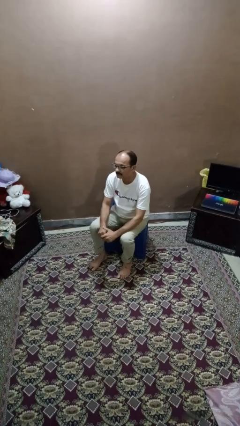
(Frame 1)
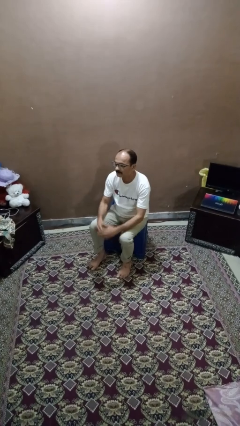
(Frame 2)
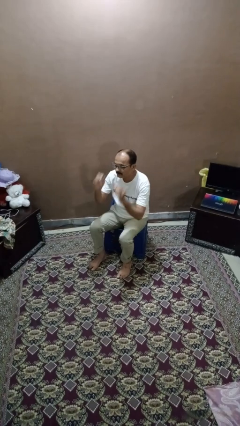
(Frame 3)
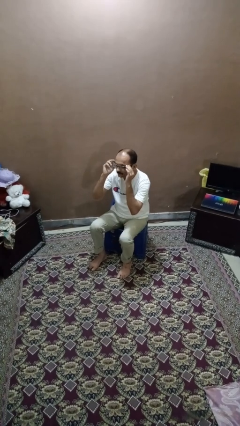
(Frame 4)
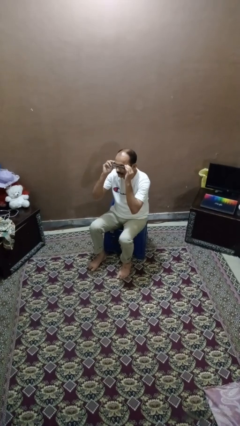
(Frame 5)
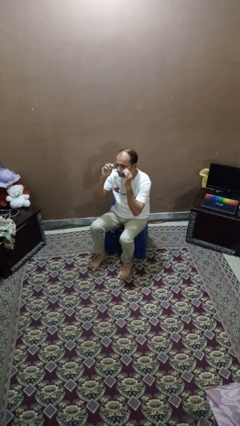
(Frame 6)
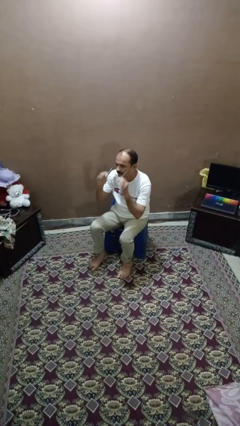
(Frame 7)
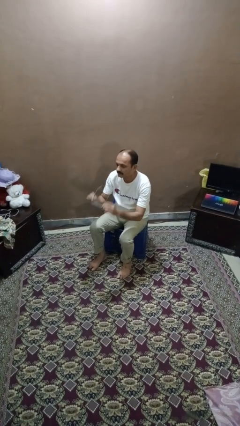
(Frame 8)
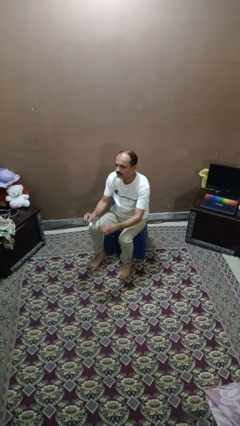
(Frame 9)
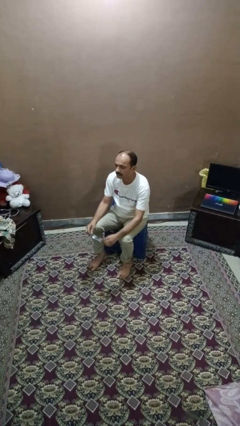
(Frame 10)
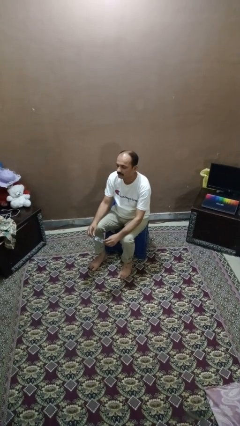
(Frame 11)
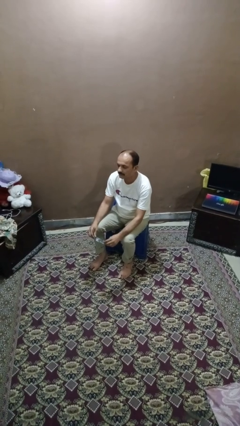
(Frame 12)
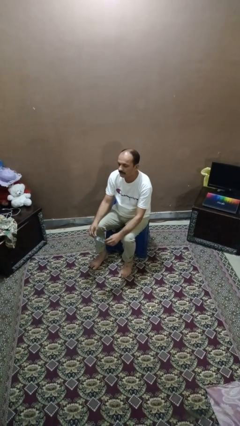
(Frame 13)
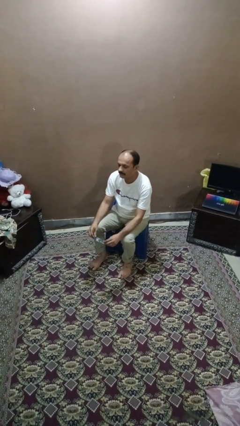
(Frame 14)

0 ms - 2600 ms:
person takes off glasses

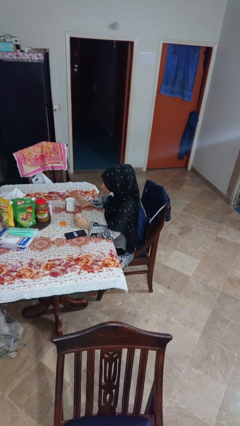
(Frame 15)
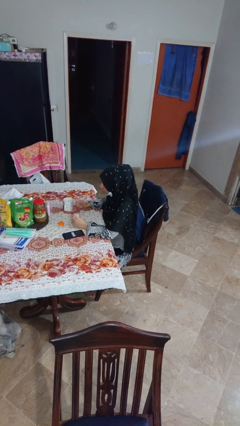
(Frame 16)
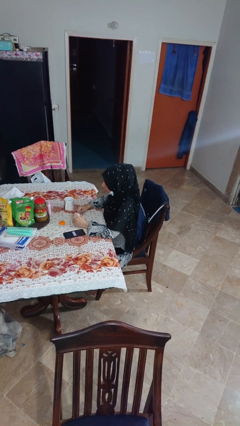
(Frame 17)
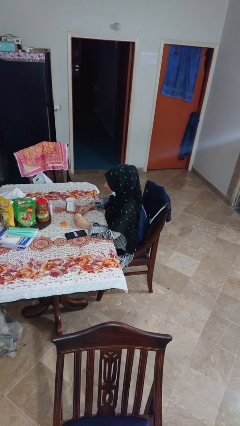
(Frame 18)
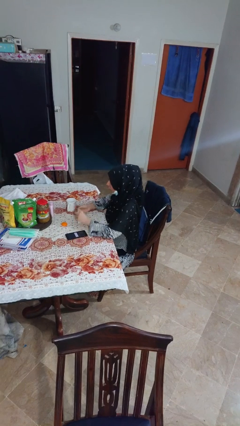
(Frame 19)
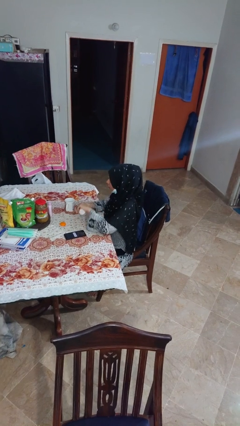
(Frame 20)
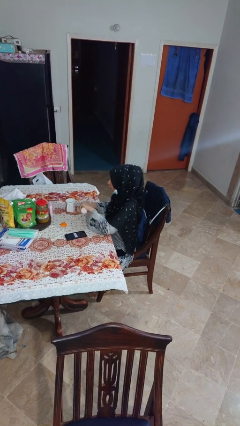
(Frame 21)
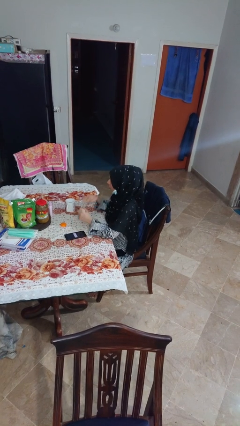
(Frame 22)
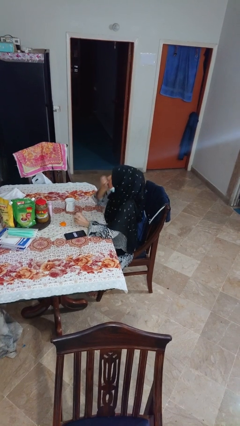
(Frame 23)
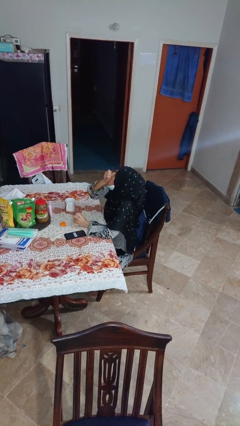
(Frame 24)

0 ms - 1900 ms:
person takes medicine pills

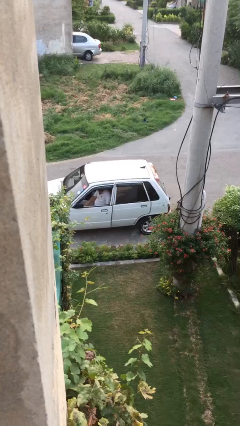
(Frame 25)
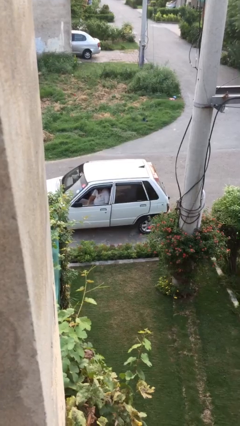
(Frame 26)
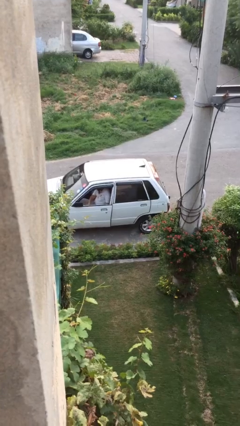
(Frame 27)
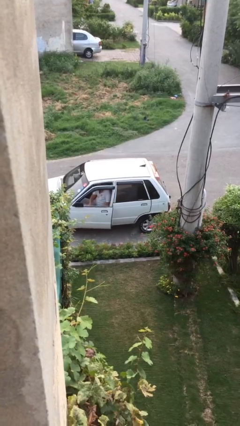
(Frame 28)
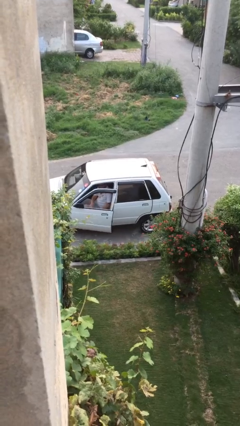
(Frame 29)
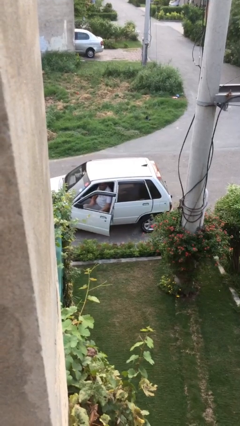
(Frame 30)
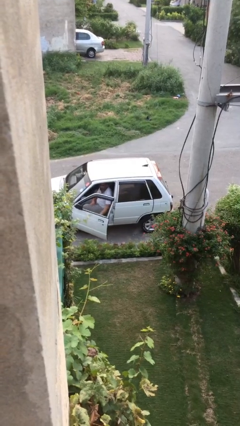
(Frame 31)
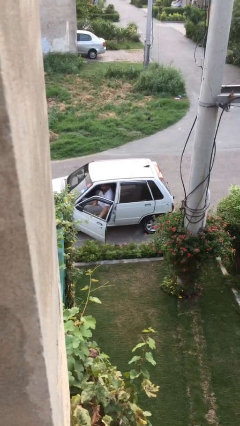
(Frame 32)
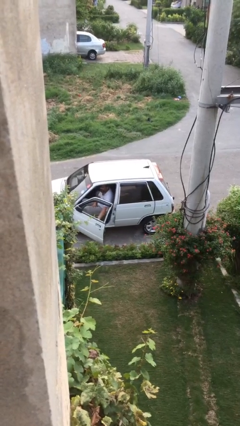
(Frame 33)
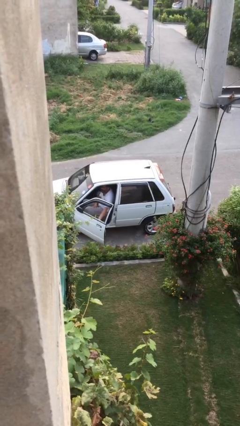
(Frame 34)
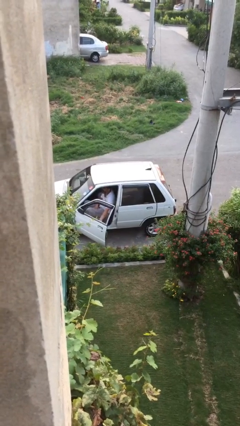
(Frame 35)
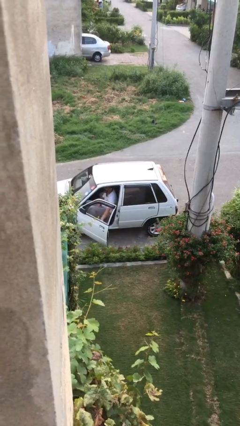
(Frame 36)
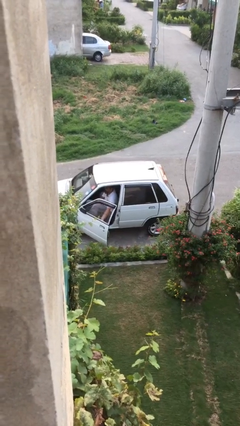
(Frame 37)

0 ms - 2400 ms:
person opens car door

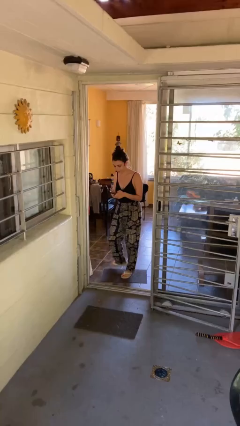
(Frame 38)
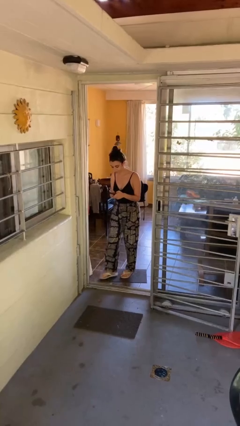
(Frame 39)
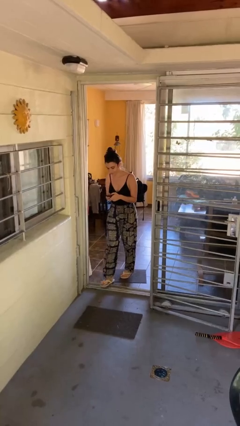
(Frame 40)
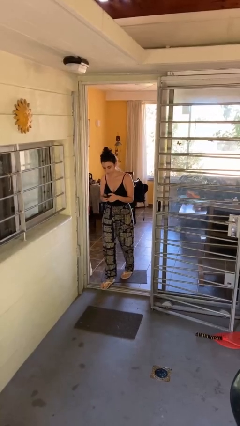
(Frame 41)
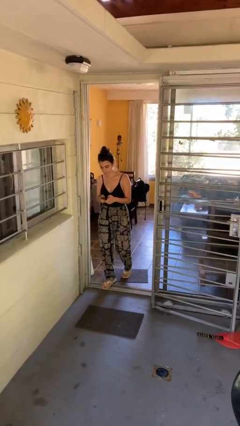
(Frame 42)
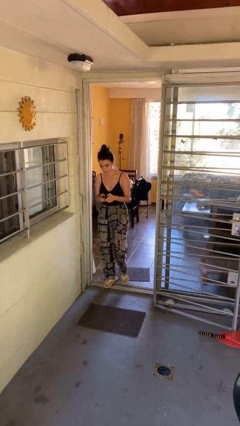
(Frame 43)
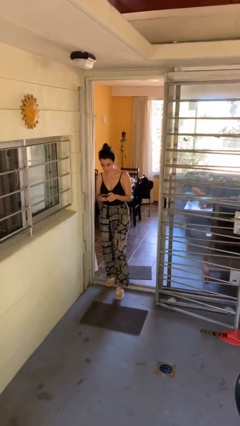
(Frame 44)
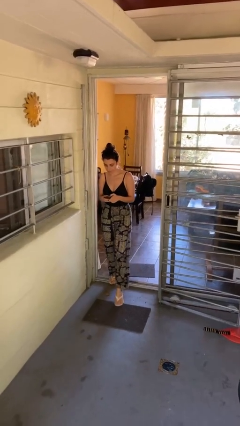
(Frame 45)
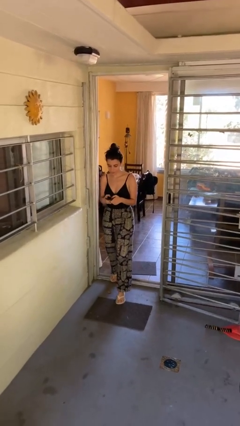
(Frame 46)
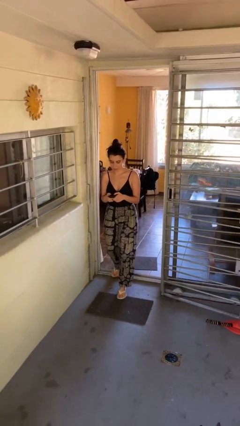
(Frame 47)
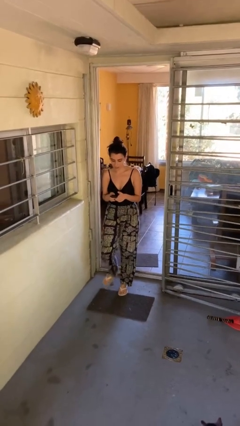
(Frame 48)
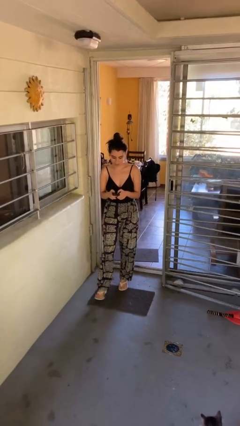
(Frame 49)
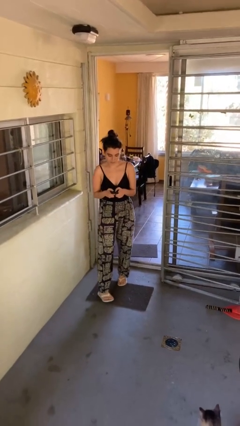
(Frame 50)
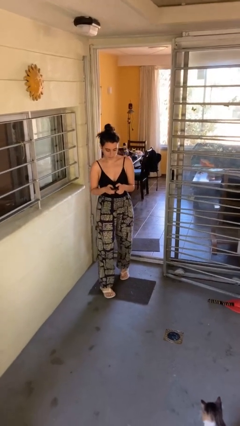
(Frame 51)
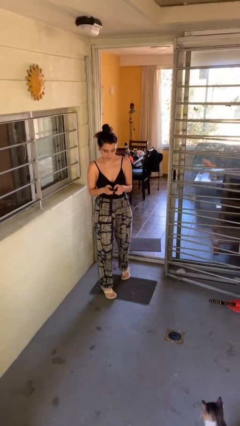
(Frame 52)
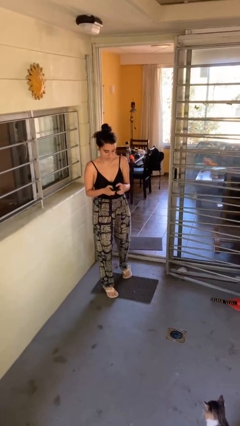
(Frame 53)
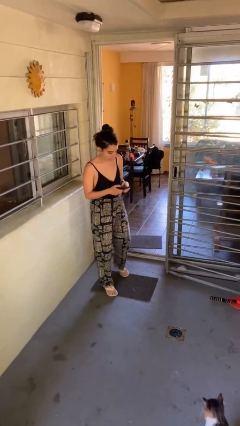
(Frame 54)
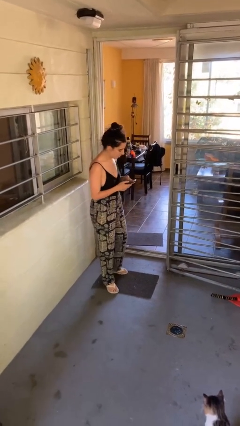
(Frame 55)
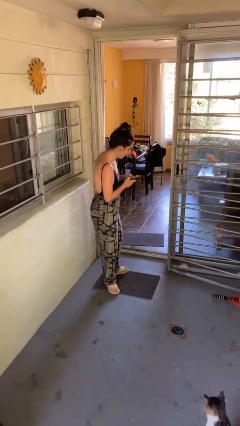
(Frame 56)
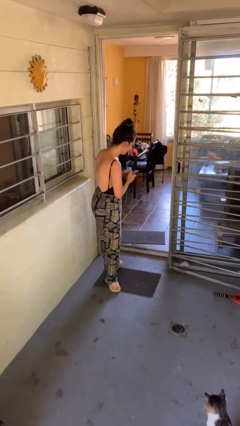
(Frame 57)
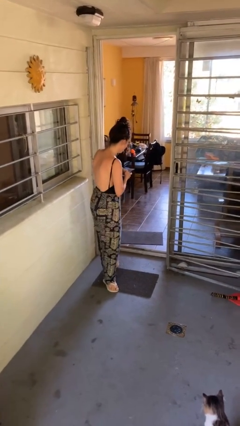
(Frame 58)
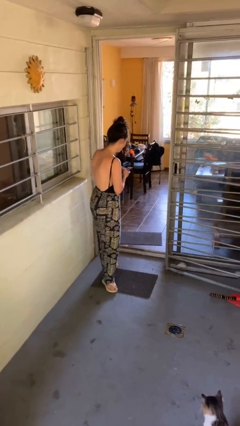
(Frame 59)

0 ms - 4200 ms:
person enters scene through structure

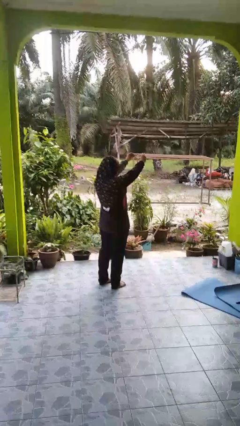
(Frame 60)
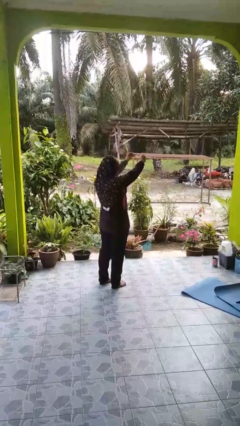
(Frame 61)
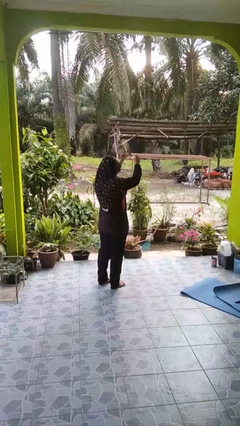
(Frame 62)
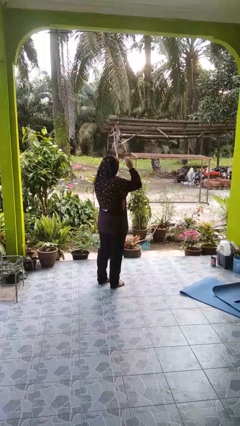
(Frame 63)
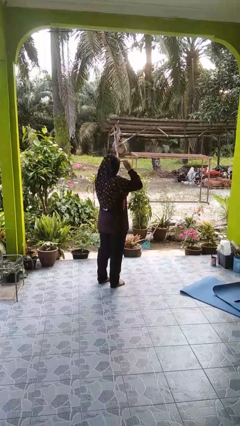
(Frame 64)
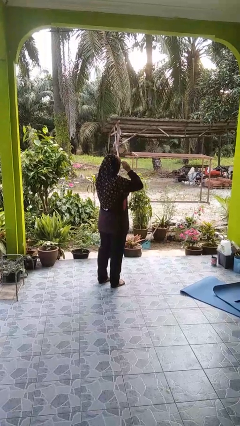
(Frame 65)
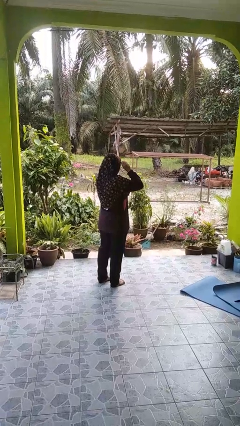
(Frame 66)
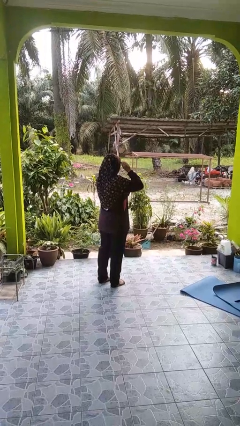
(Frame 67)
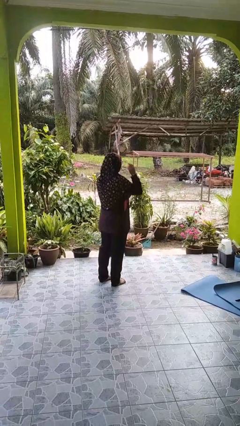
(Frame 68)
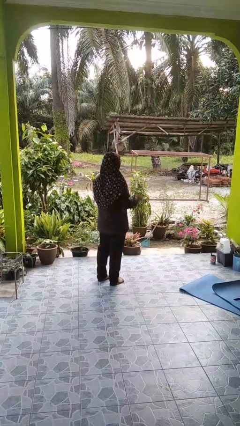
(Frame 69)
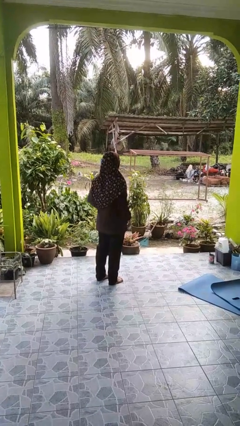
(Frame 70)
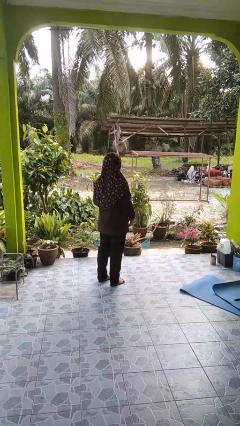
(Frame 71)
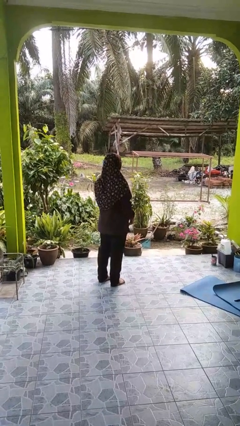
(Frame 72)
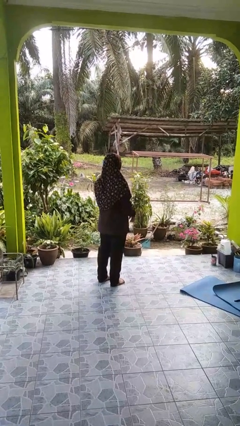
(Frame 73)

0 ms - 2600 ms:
person puts on glasses

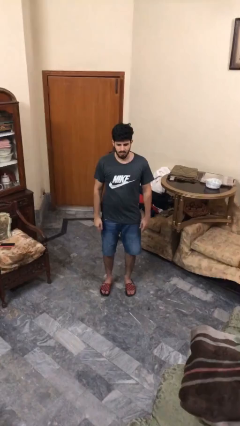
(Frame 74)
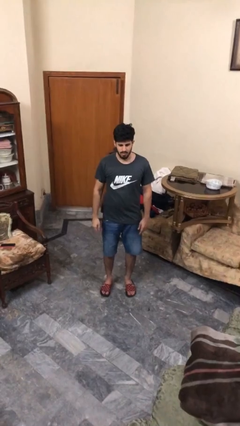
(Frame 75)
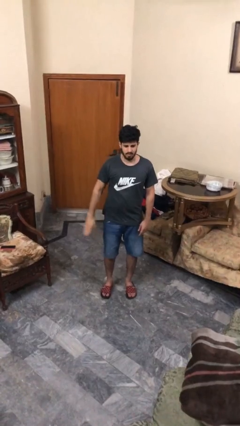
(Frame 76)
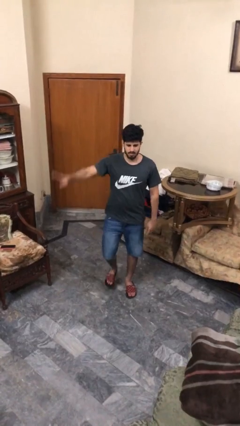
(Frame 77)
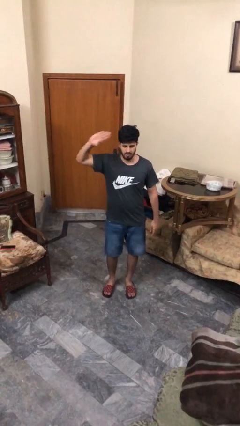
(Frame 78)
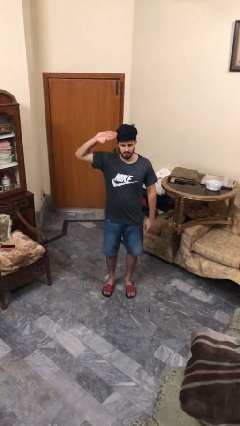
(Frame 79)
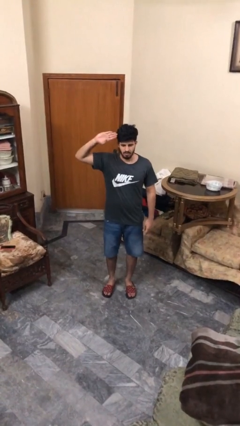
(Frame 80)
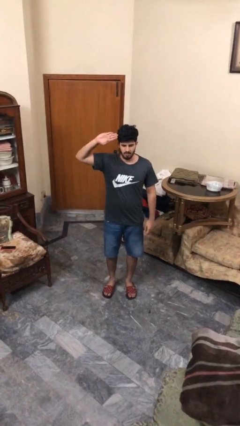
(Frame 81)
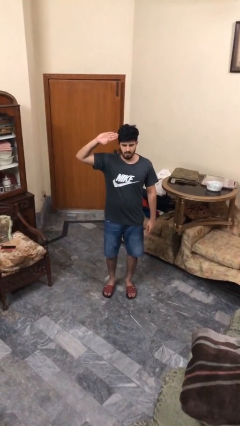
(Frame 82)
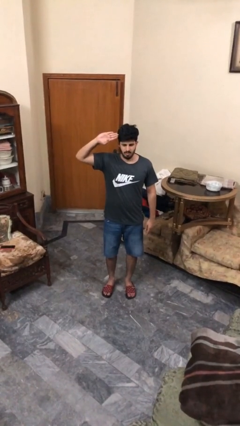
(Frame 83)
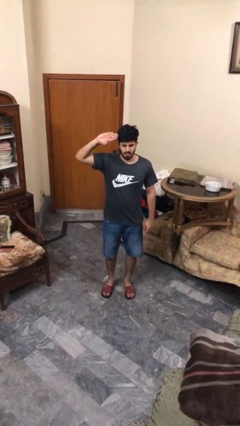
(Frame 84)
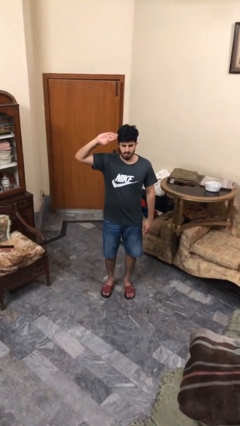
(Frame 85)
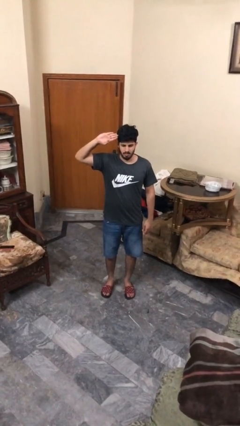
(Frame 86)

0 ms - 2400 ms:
person salutes

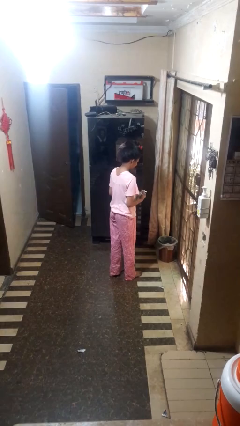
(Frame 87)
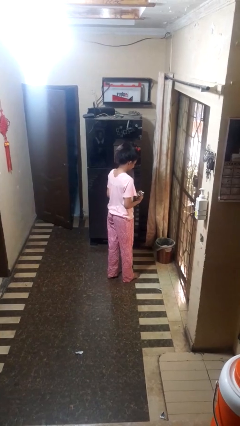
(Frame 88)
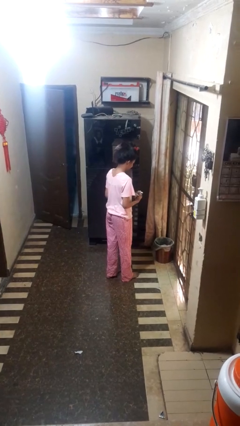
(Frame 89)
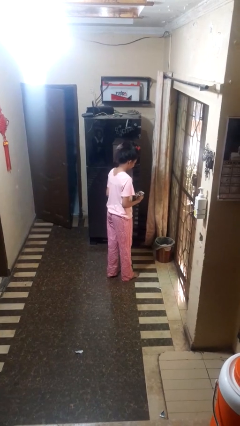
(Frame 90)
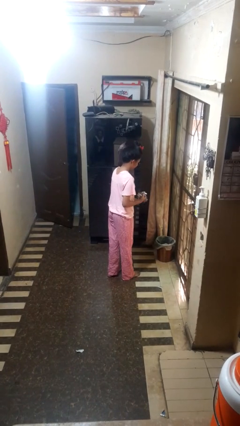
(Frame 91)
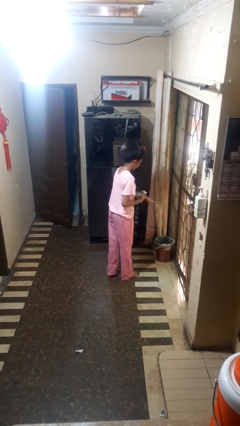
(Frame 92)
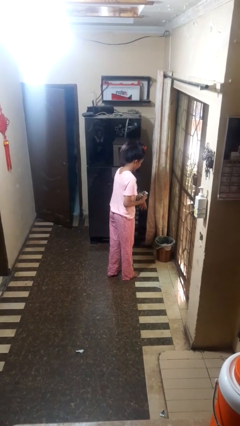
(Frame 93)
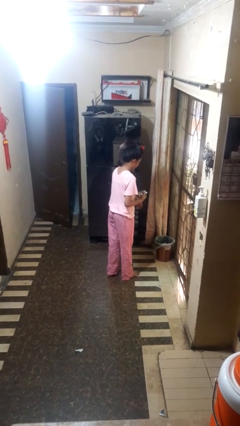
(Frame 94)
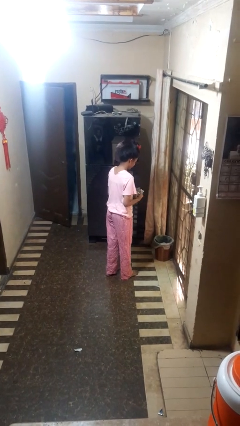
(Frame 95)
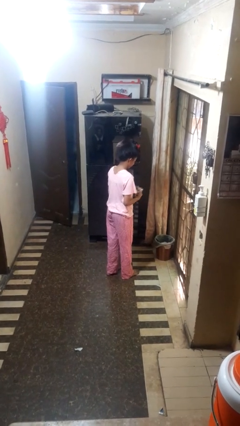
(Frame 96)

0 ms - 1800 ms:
person discards trash
